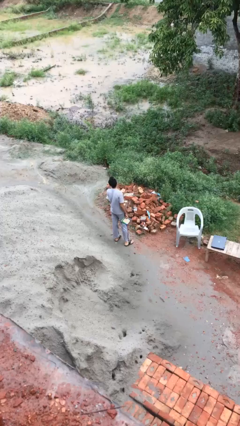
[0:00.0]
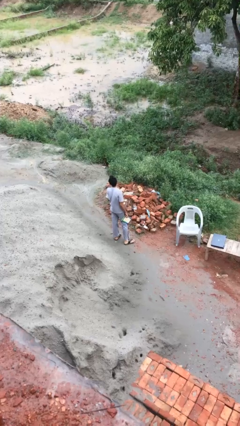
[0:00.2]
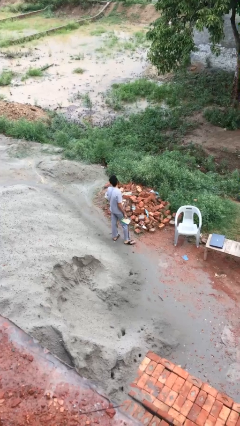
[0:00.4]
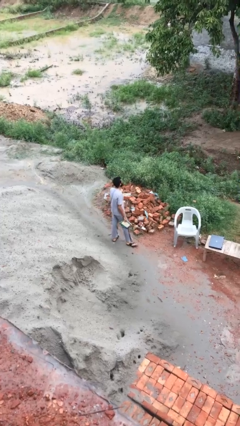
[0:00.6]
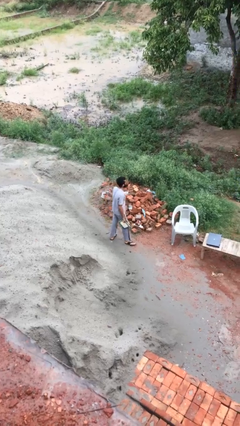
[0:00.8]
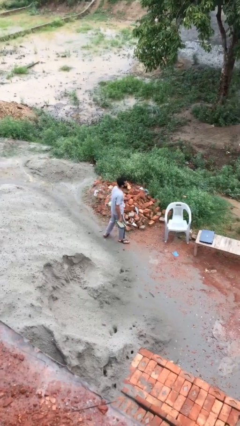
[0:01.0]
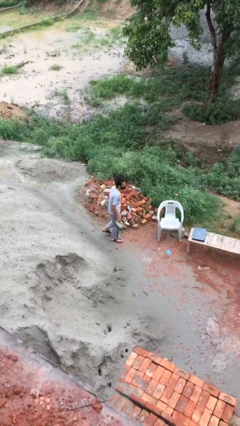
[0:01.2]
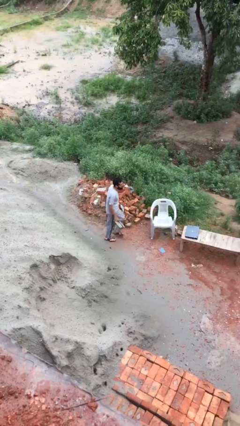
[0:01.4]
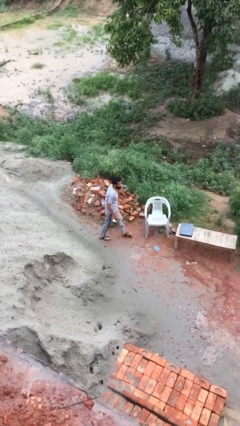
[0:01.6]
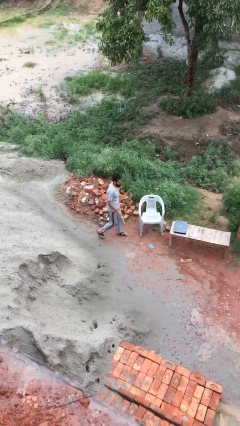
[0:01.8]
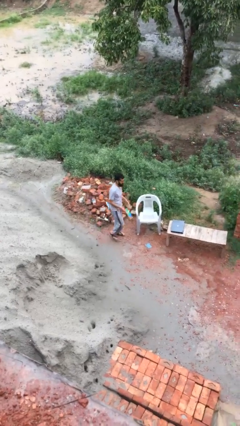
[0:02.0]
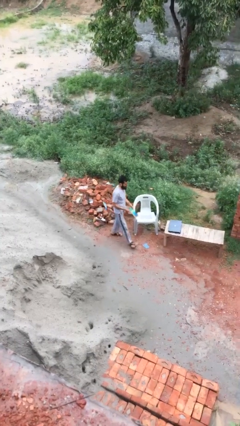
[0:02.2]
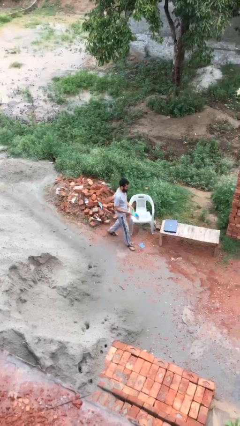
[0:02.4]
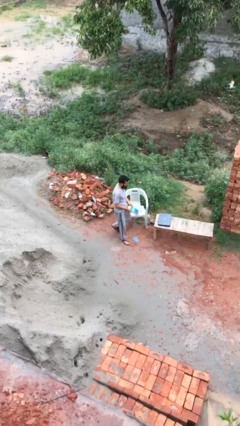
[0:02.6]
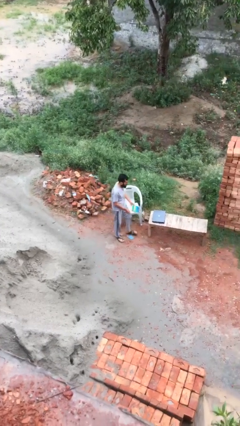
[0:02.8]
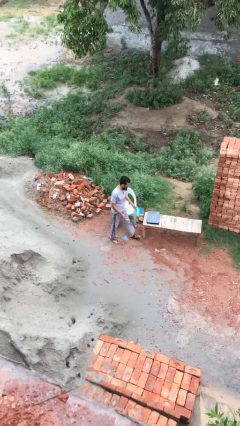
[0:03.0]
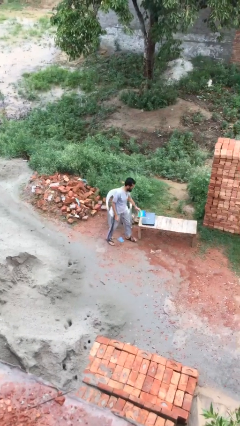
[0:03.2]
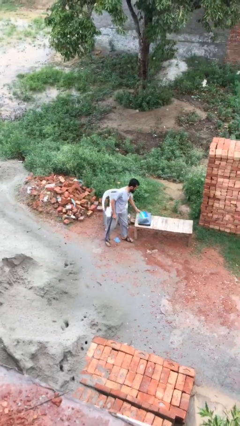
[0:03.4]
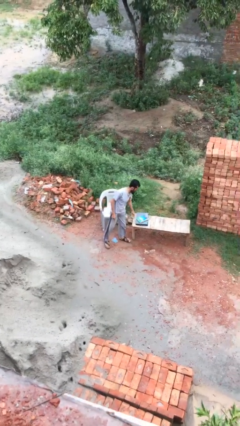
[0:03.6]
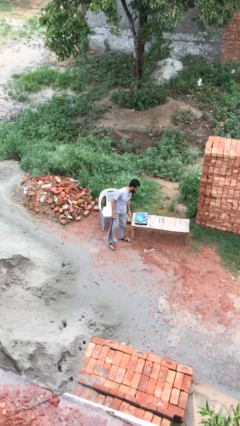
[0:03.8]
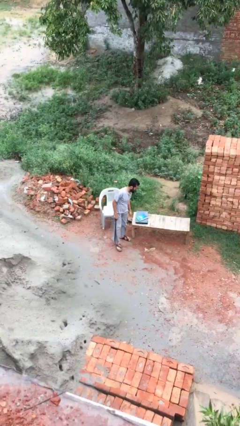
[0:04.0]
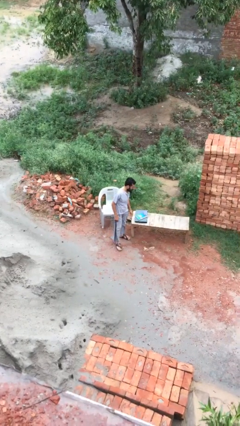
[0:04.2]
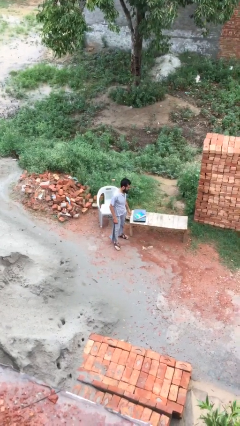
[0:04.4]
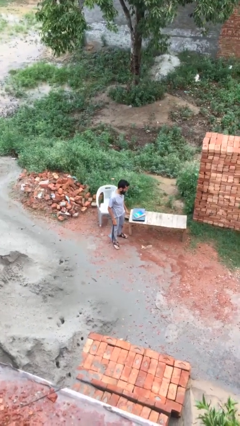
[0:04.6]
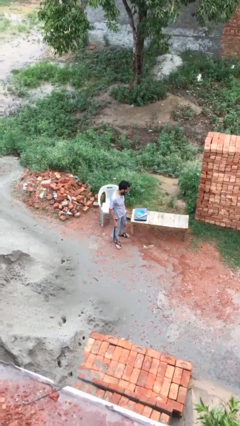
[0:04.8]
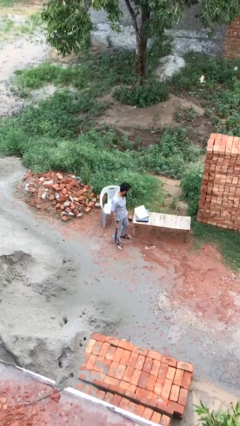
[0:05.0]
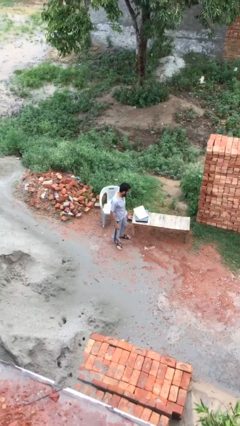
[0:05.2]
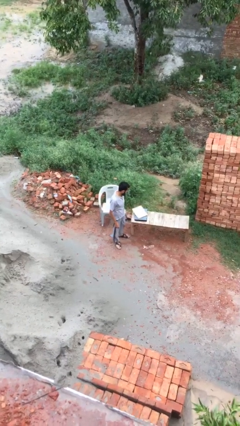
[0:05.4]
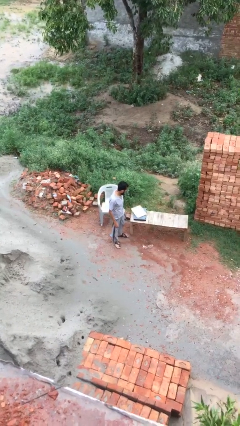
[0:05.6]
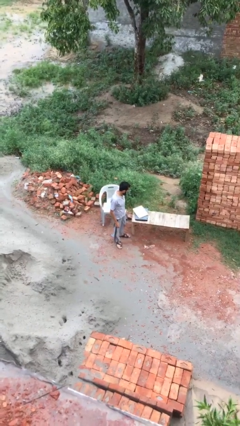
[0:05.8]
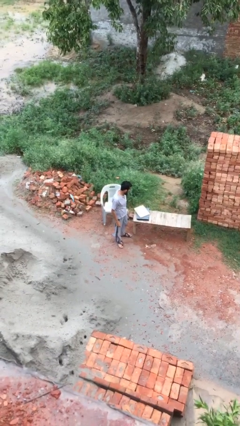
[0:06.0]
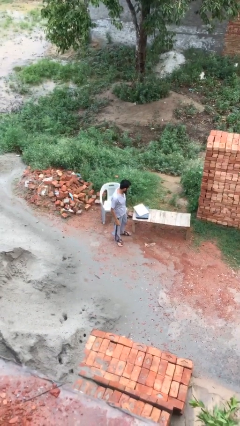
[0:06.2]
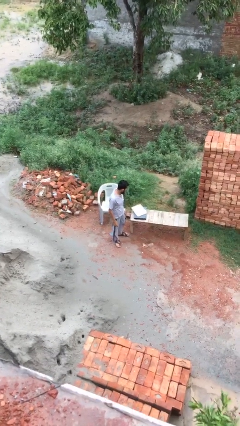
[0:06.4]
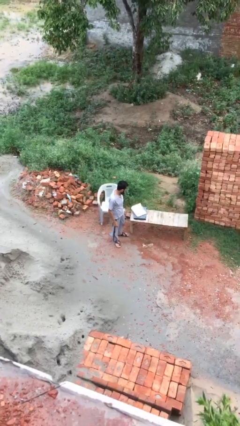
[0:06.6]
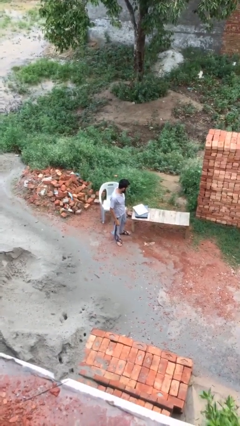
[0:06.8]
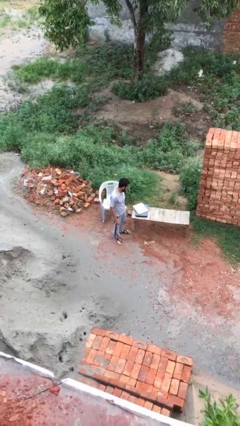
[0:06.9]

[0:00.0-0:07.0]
person puts down object on table

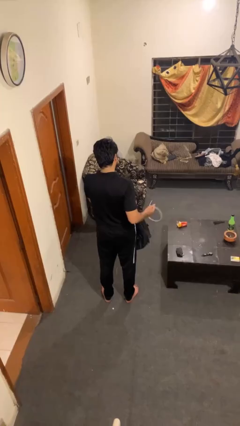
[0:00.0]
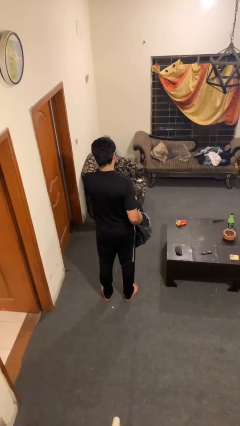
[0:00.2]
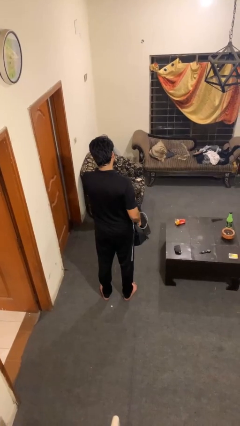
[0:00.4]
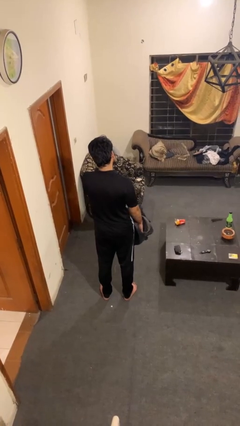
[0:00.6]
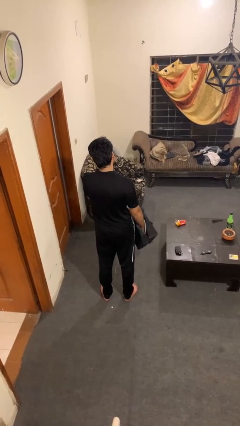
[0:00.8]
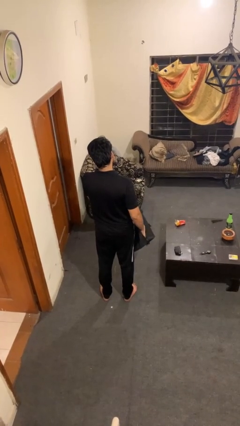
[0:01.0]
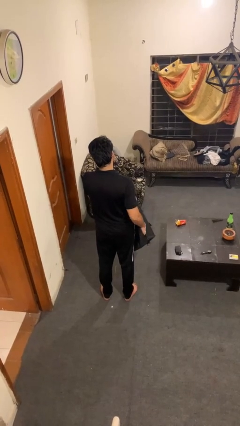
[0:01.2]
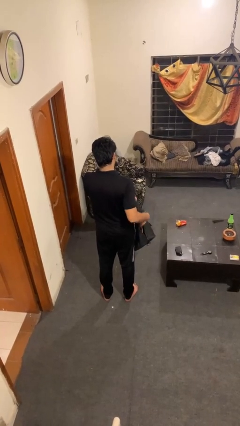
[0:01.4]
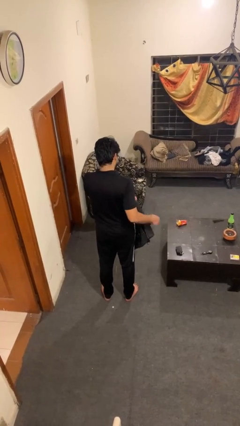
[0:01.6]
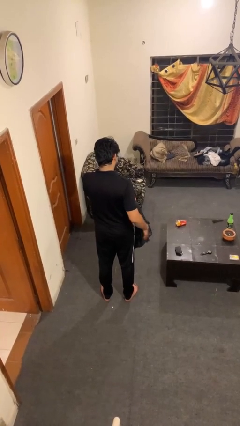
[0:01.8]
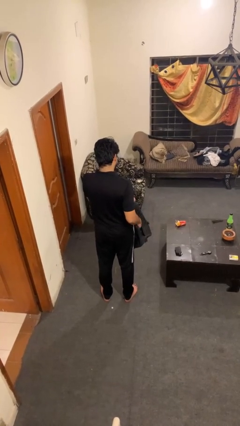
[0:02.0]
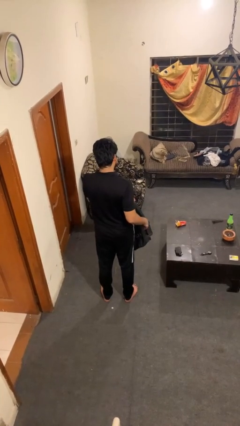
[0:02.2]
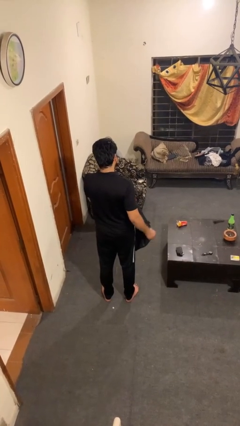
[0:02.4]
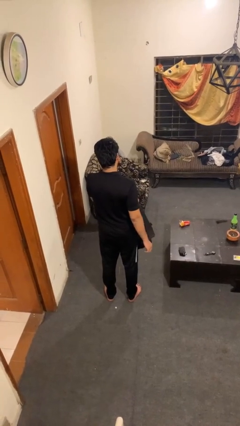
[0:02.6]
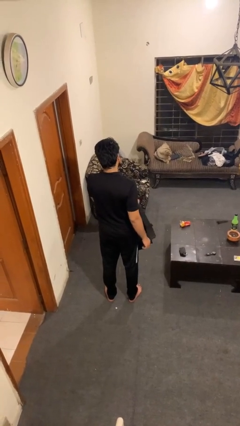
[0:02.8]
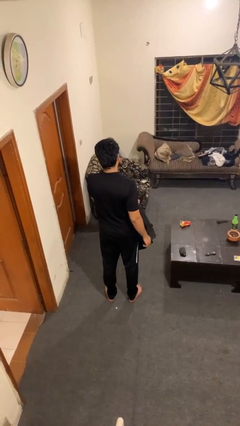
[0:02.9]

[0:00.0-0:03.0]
person puts object into bag

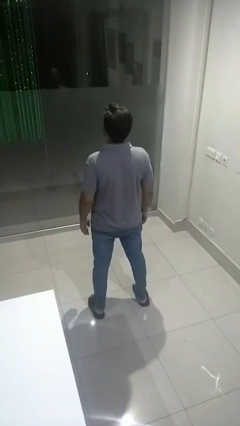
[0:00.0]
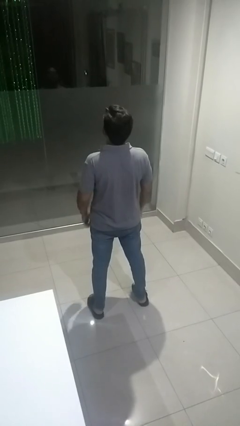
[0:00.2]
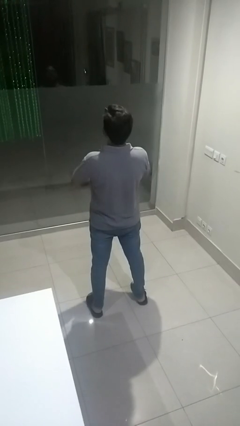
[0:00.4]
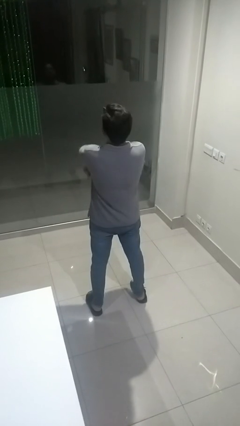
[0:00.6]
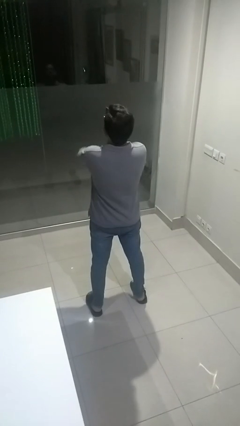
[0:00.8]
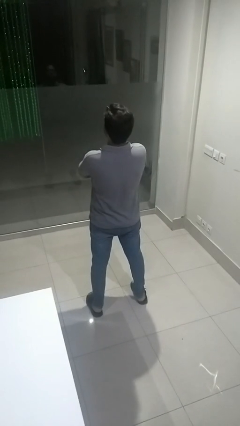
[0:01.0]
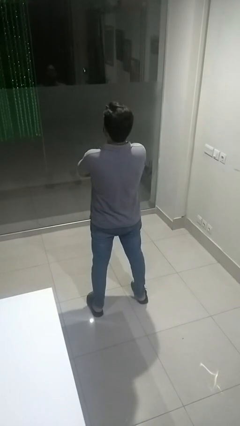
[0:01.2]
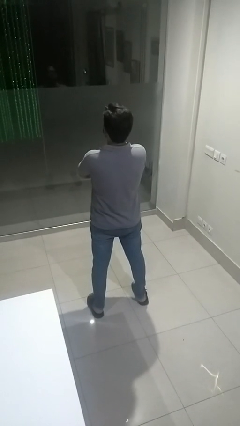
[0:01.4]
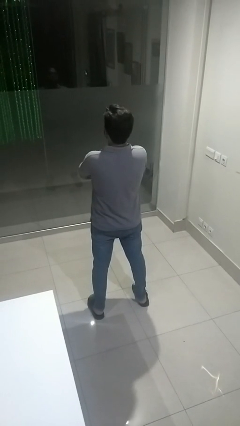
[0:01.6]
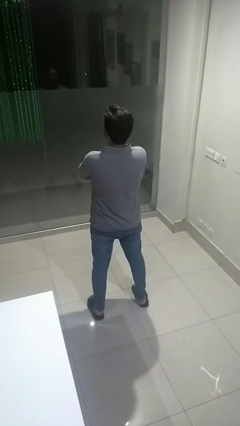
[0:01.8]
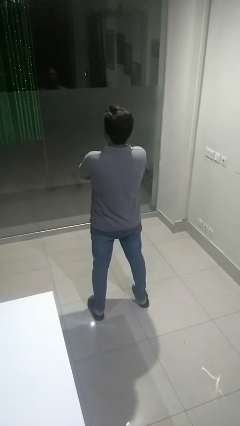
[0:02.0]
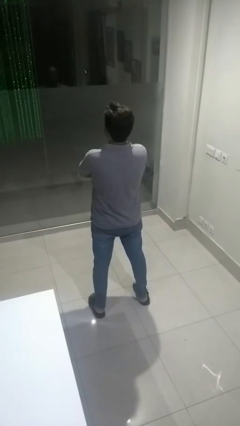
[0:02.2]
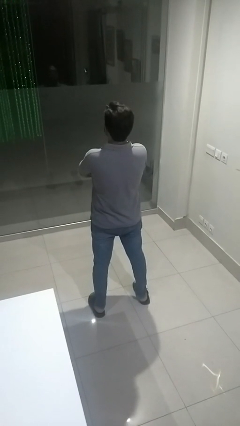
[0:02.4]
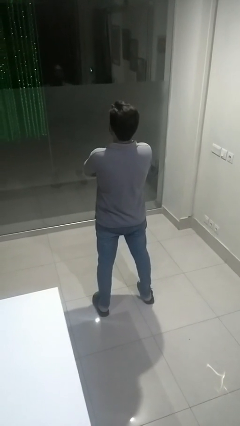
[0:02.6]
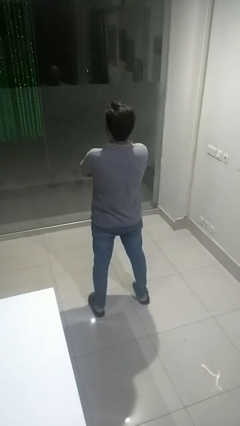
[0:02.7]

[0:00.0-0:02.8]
person crosses arms

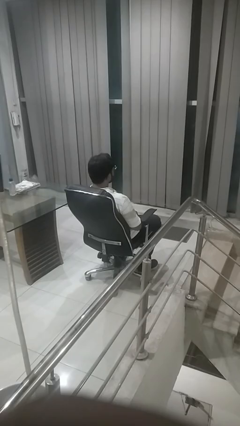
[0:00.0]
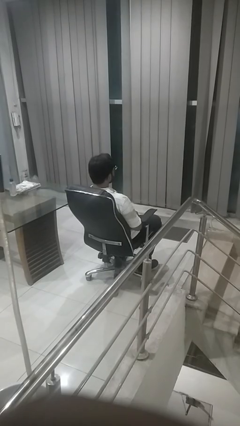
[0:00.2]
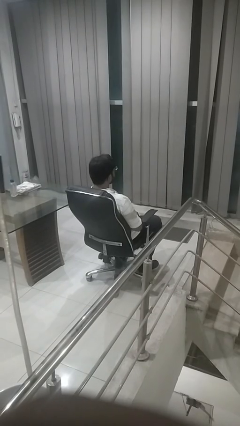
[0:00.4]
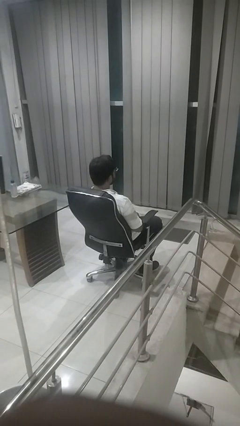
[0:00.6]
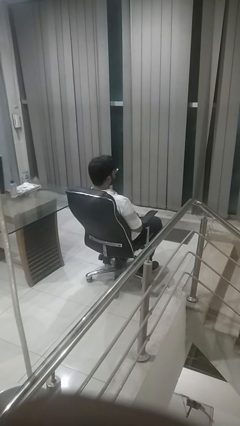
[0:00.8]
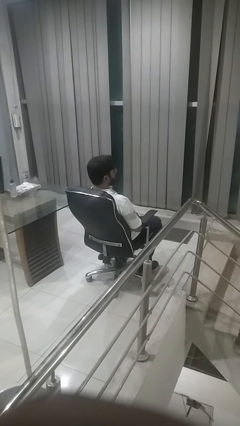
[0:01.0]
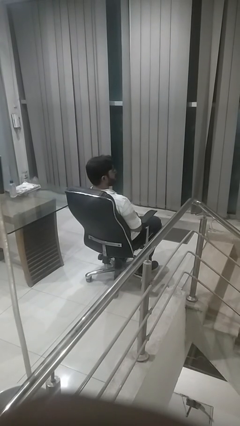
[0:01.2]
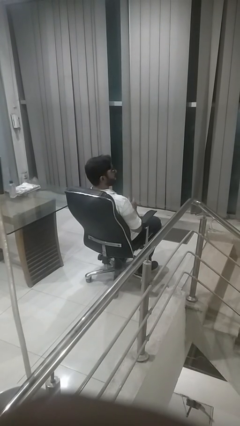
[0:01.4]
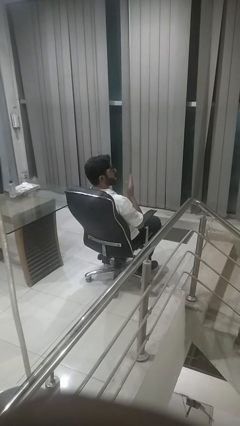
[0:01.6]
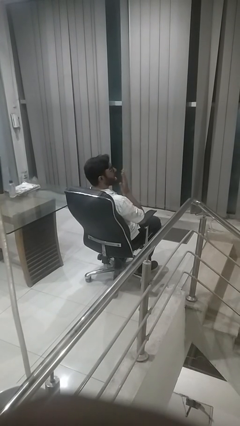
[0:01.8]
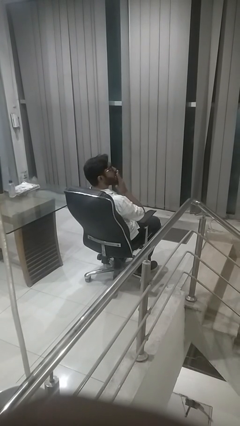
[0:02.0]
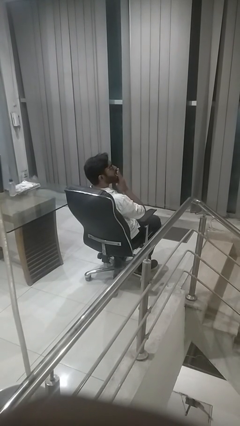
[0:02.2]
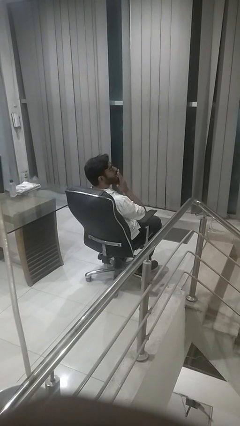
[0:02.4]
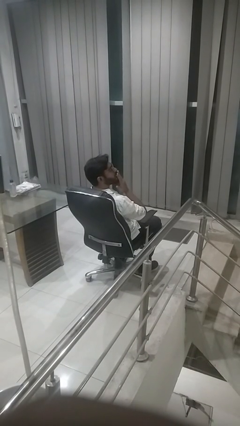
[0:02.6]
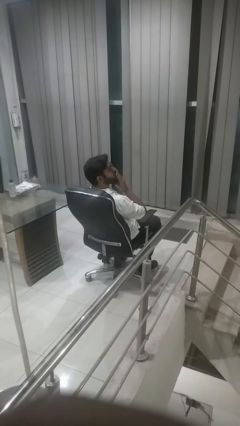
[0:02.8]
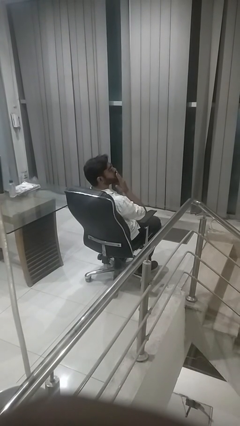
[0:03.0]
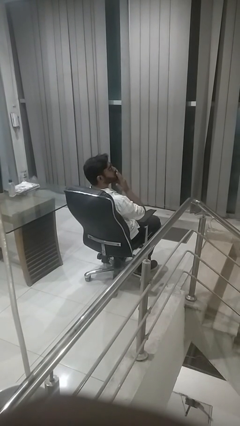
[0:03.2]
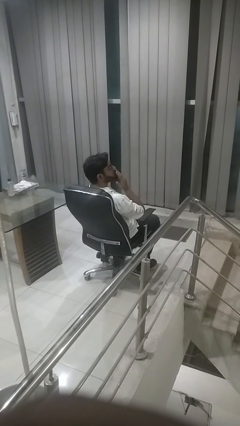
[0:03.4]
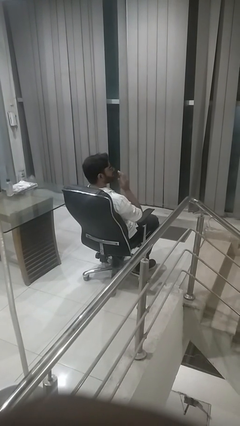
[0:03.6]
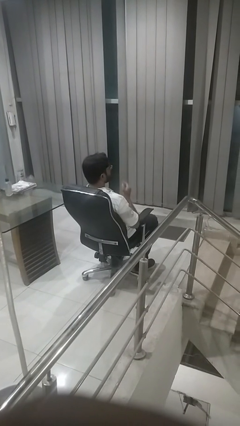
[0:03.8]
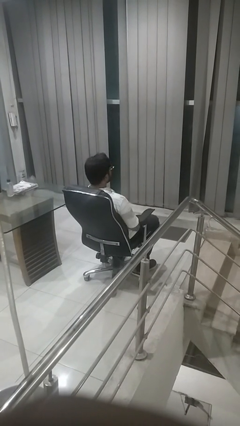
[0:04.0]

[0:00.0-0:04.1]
person yawns

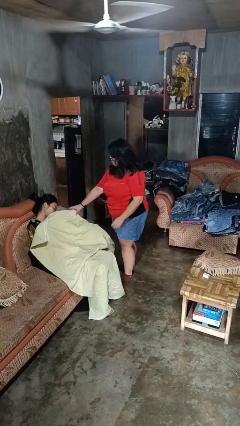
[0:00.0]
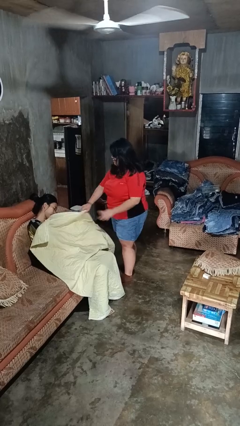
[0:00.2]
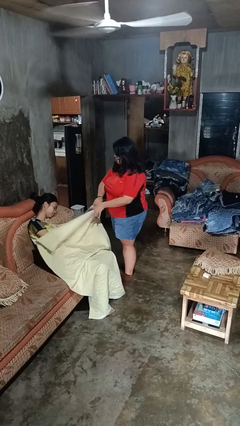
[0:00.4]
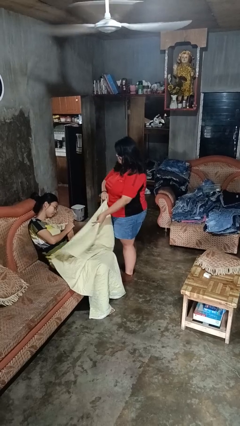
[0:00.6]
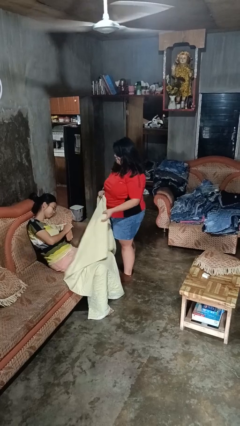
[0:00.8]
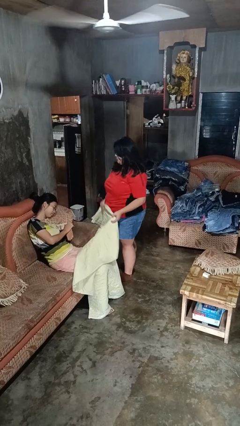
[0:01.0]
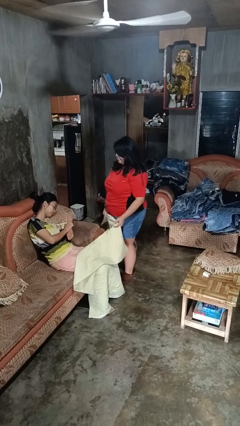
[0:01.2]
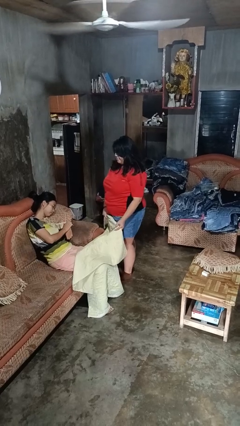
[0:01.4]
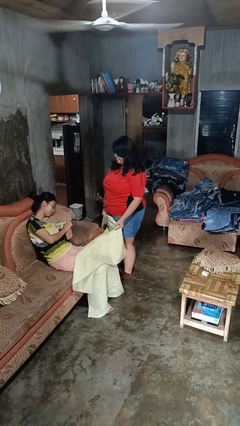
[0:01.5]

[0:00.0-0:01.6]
person uncovers friend with blanket
